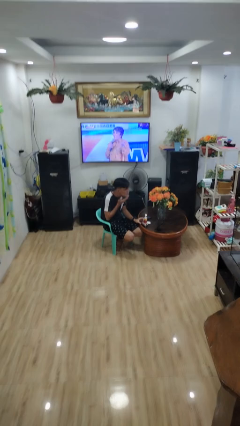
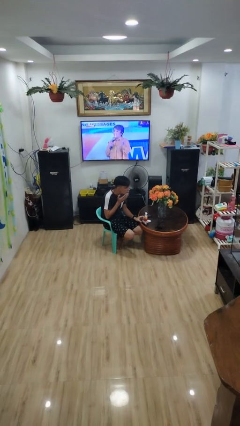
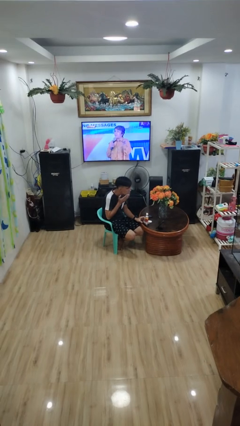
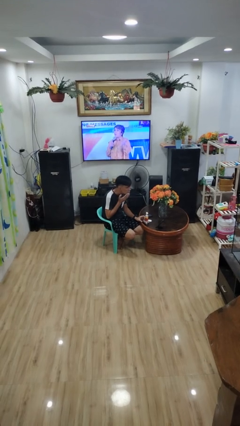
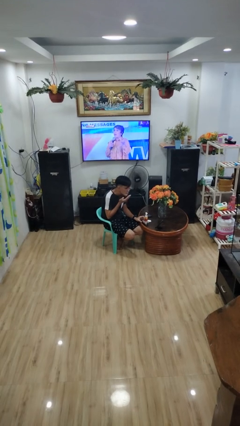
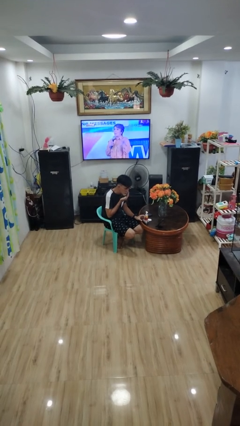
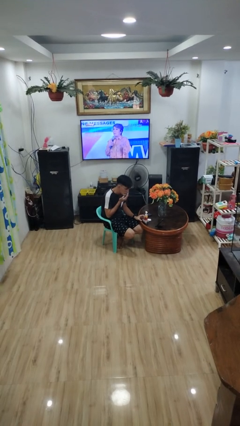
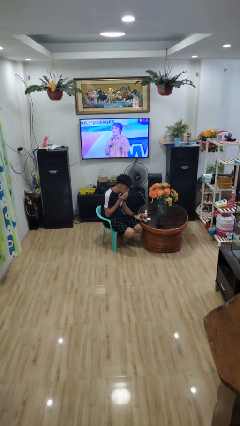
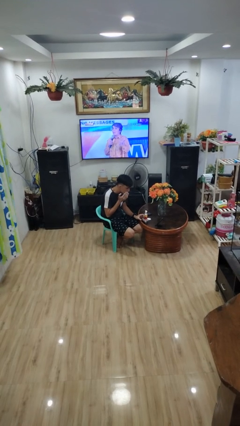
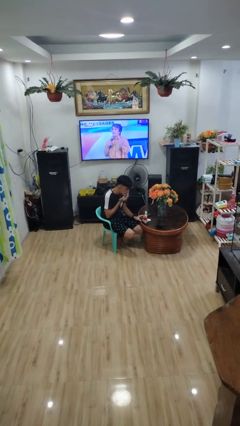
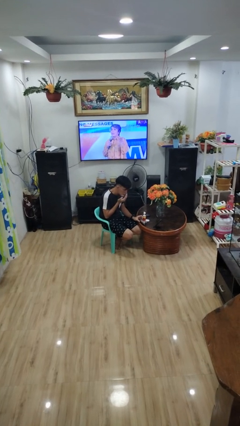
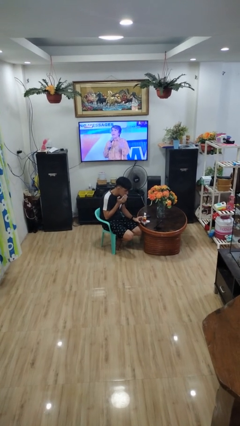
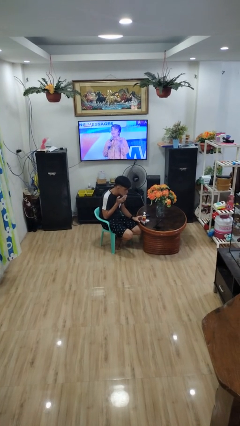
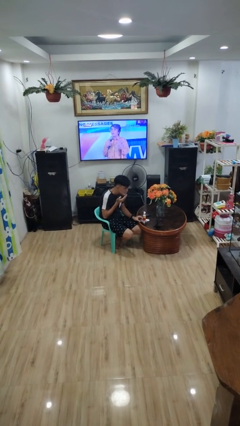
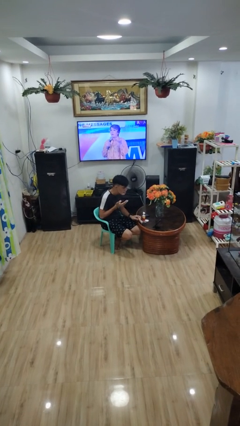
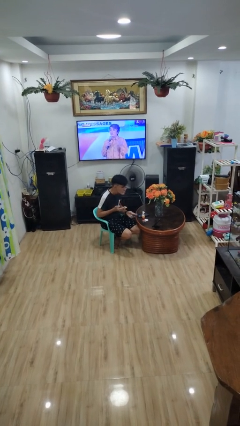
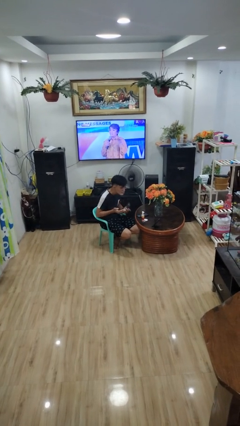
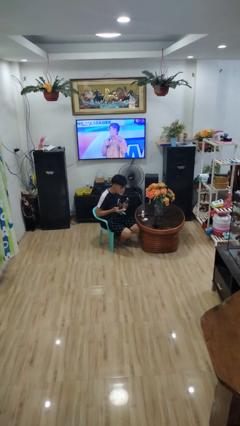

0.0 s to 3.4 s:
person applies shaving cream

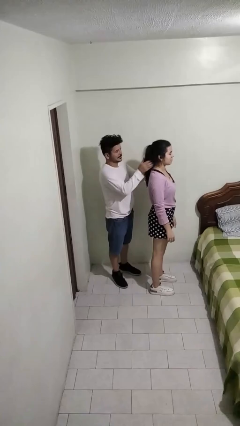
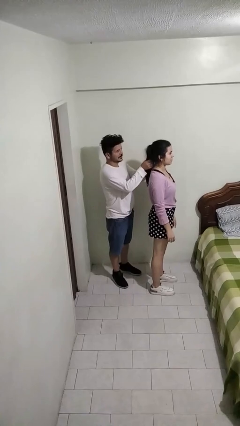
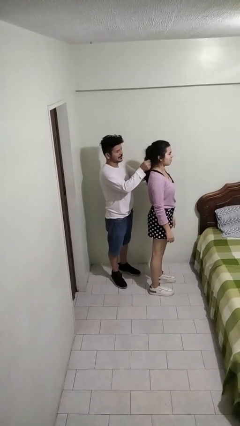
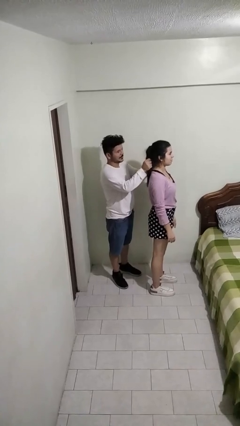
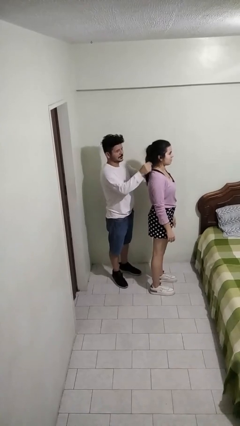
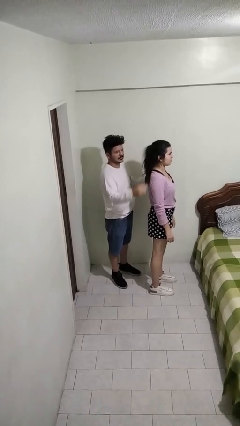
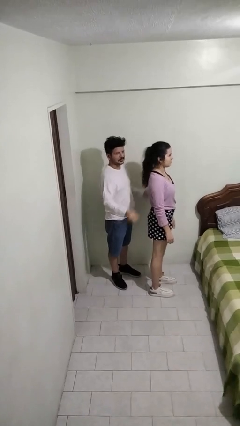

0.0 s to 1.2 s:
person grabs person by hair

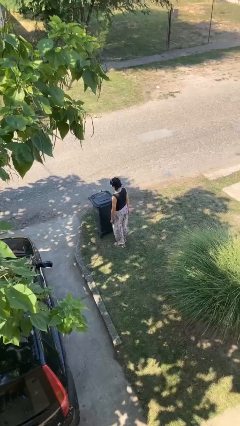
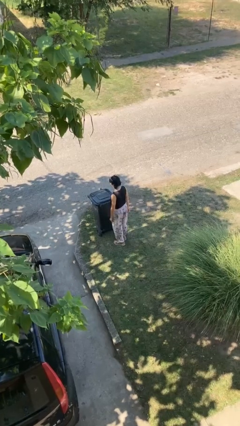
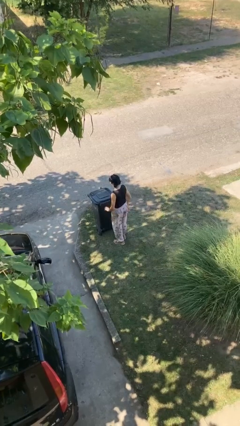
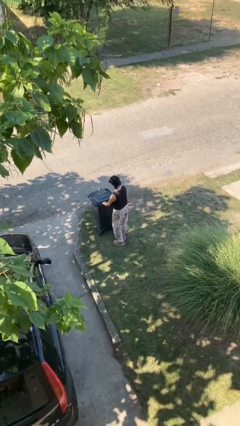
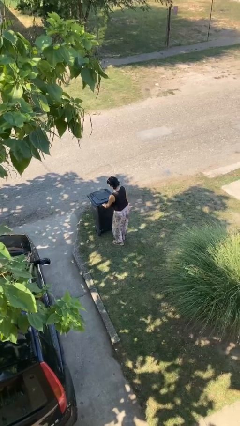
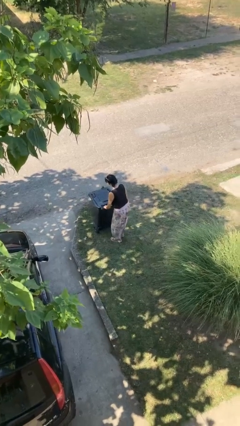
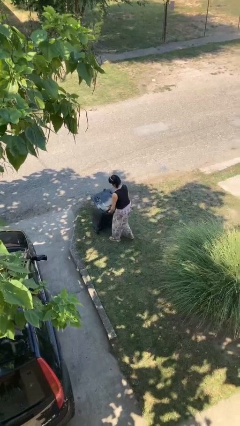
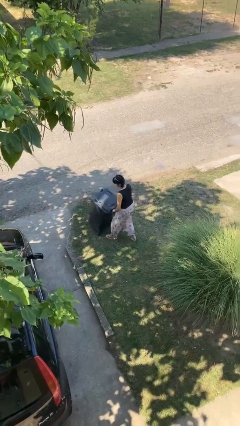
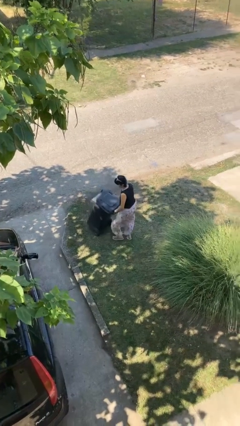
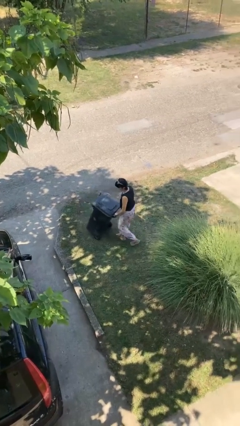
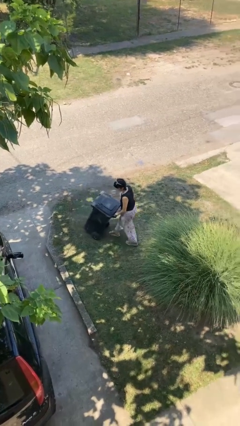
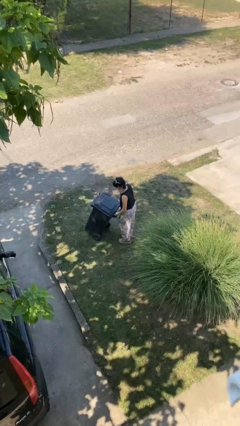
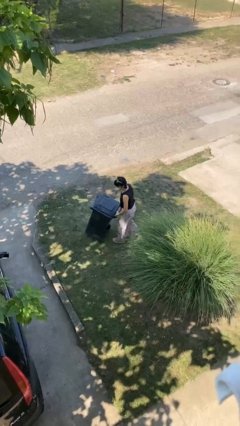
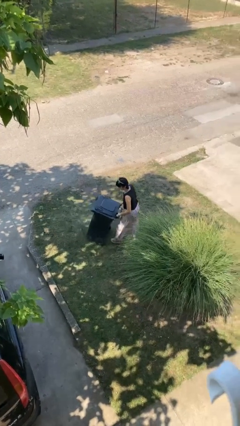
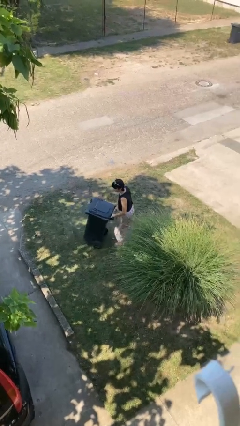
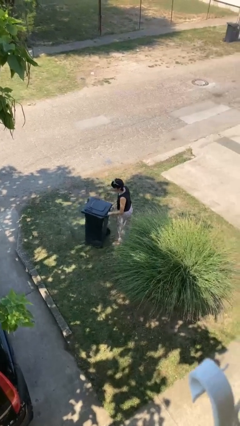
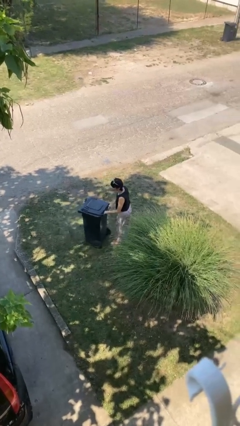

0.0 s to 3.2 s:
person pulls wheeled trashcan

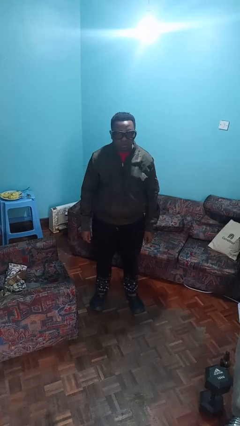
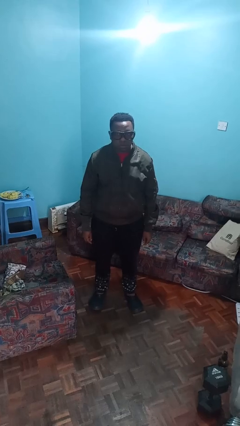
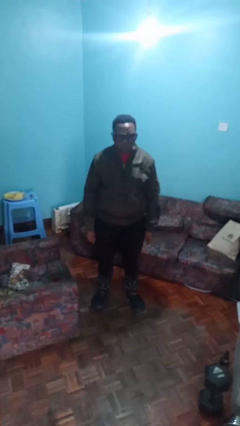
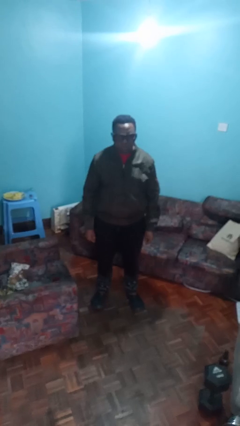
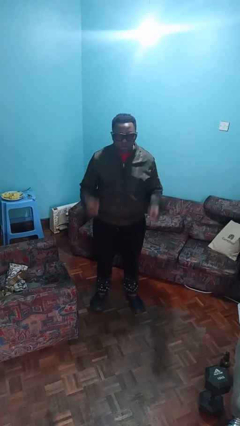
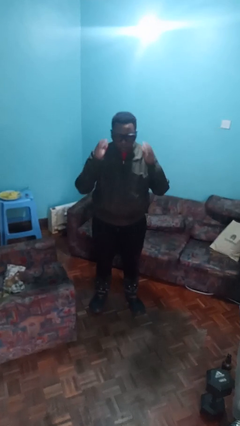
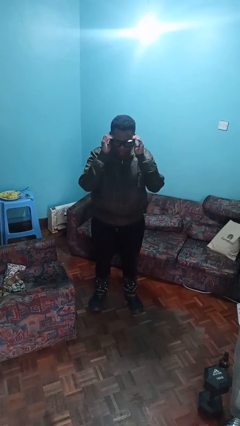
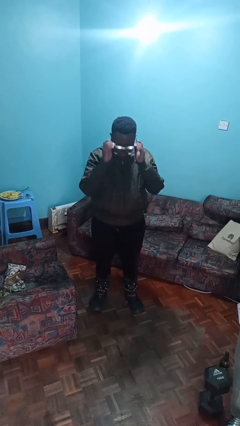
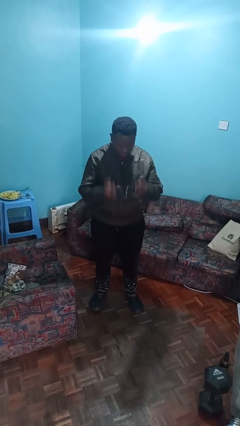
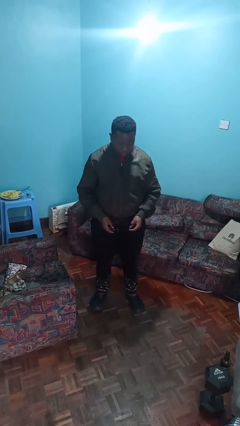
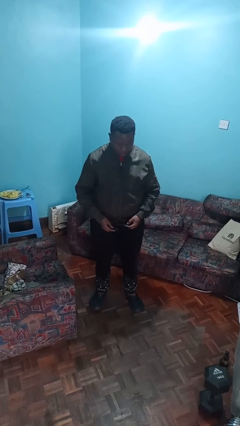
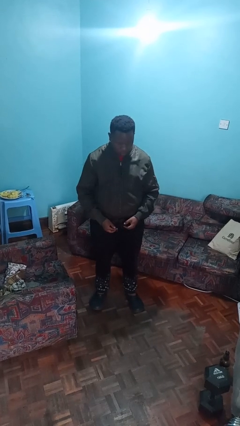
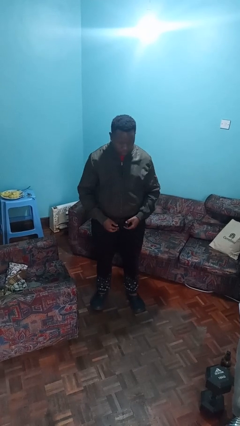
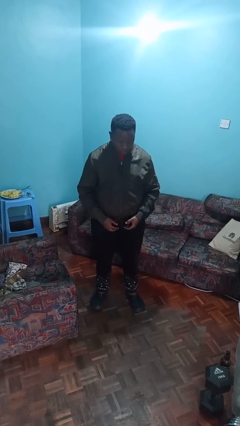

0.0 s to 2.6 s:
person takes off glasses

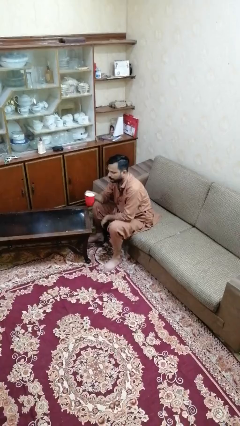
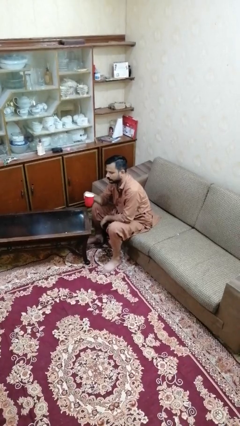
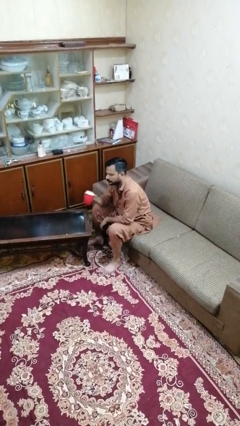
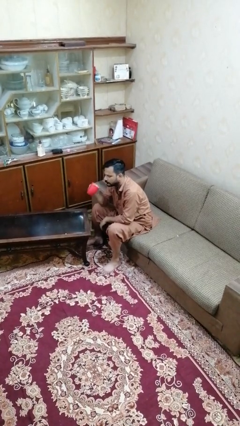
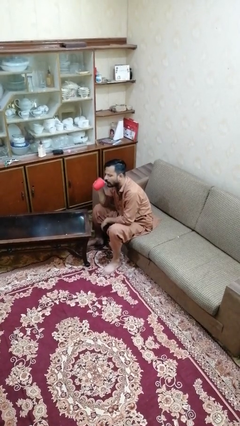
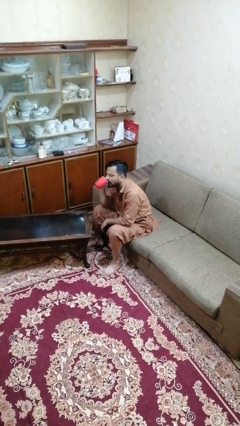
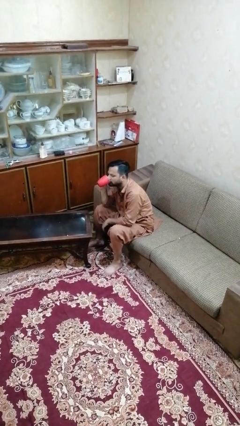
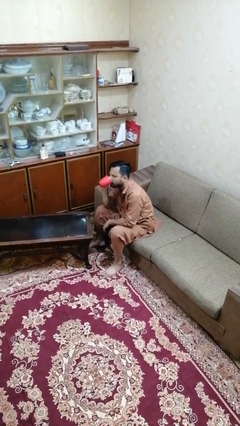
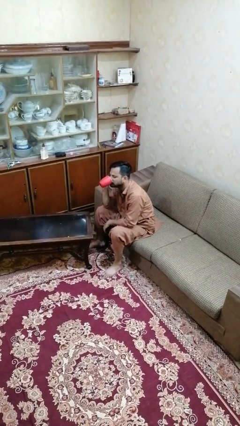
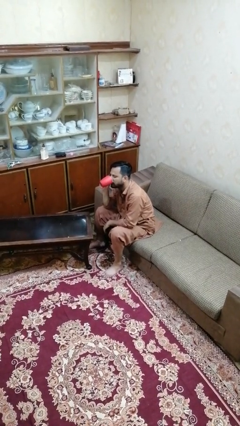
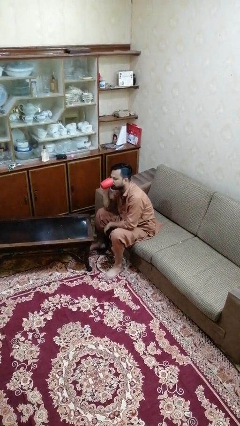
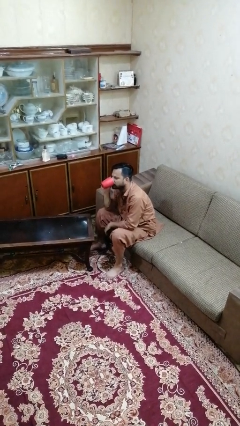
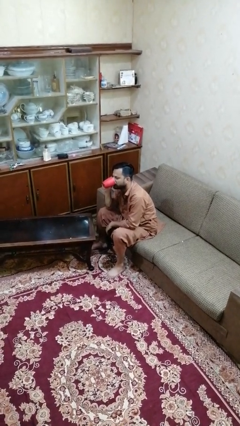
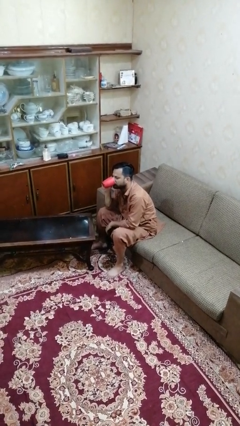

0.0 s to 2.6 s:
person drinks from mug

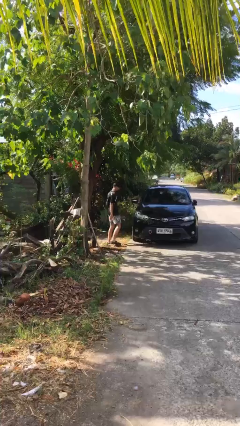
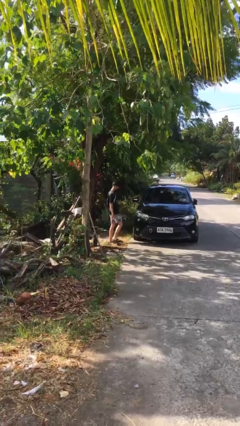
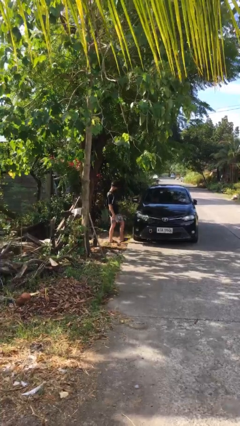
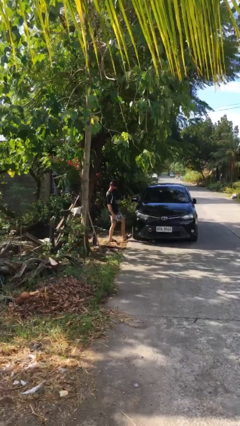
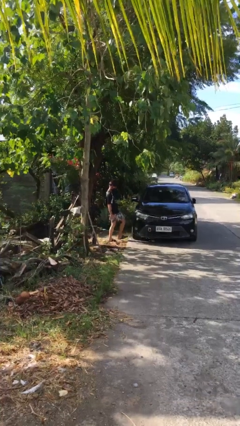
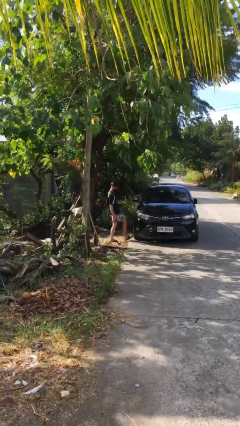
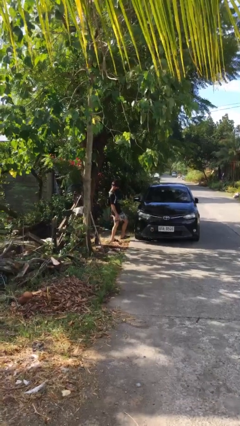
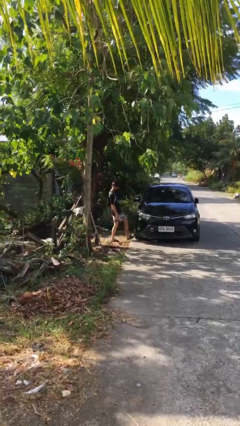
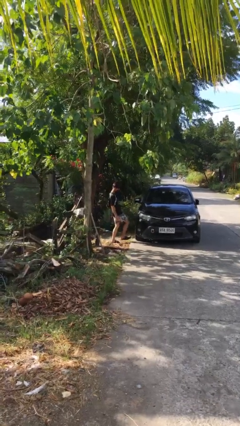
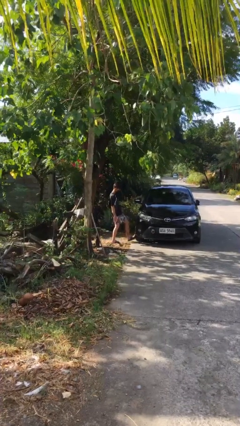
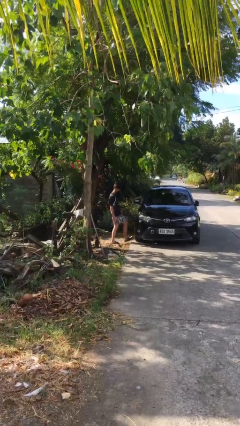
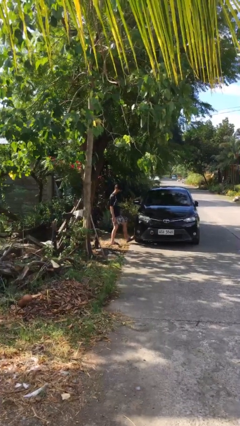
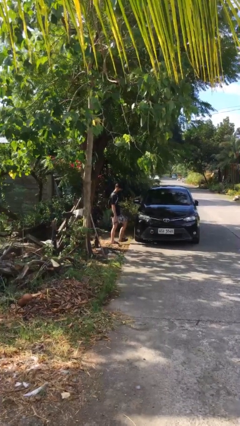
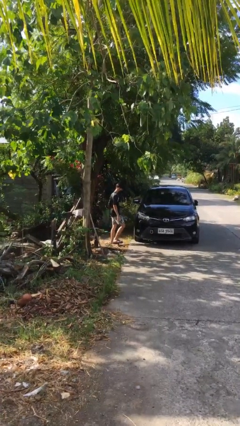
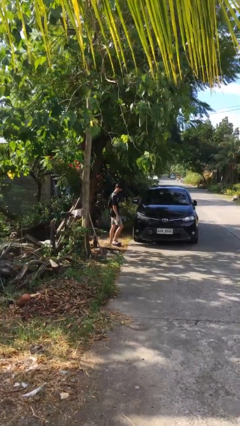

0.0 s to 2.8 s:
person kicks car tires

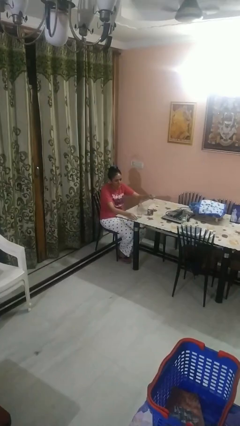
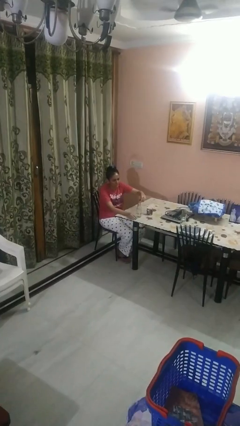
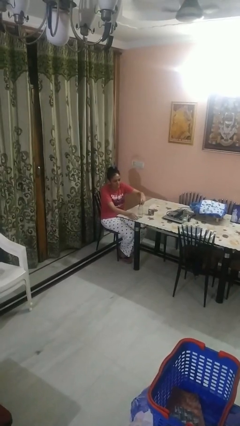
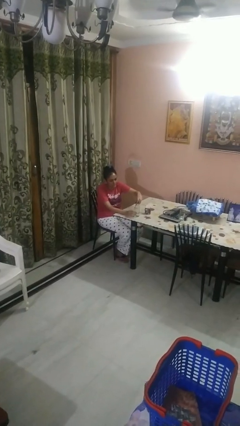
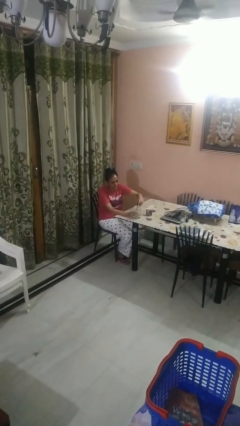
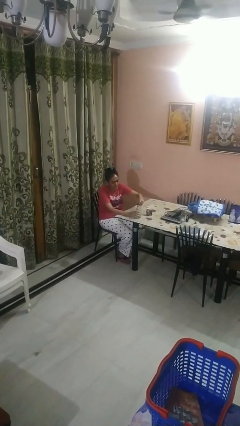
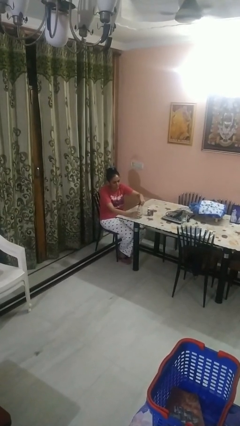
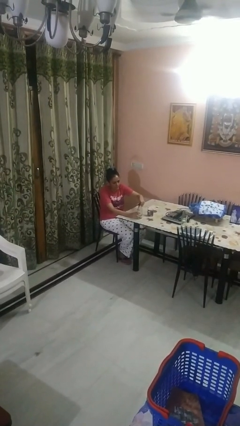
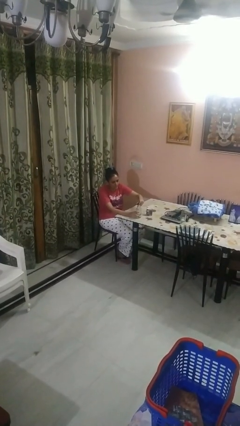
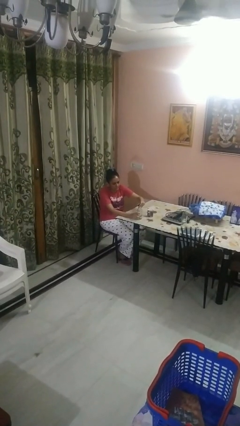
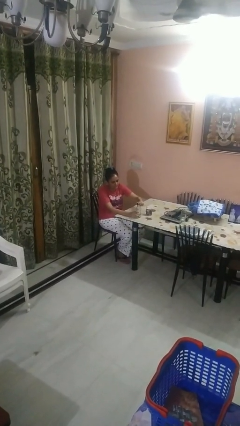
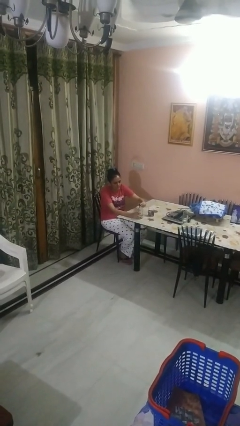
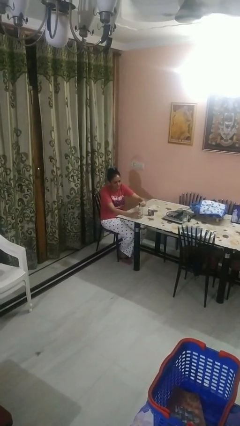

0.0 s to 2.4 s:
person screws lid to bottle
